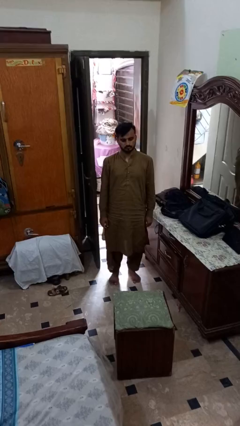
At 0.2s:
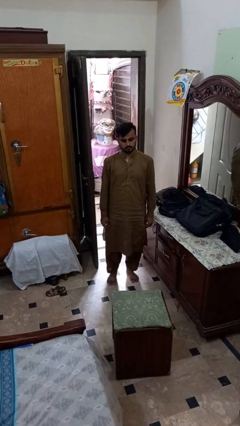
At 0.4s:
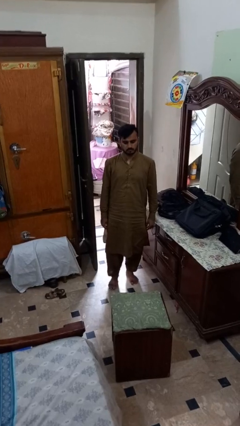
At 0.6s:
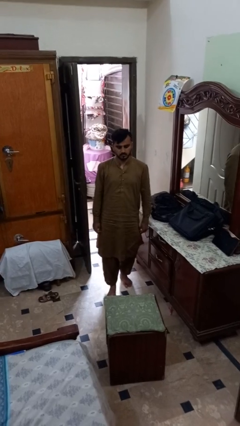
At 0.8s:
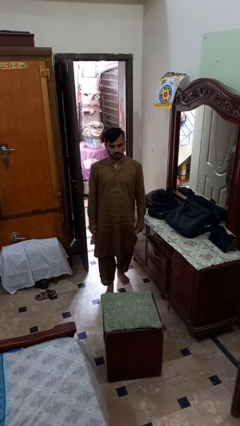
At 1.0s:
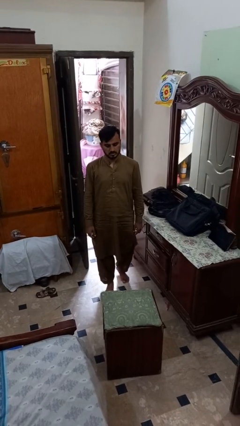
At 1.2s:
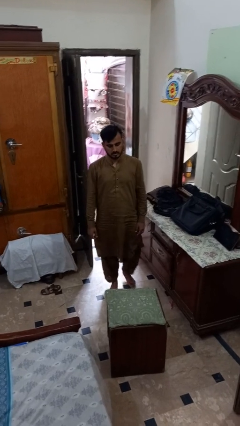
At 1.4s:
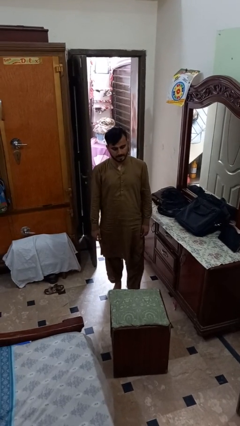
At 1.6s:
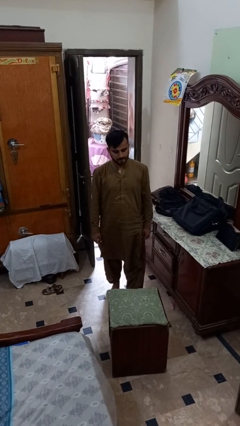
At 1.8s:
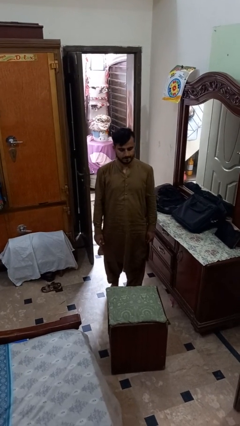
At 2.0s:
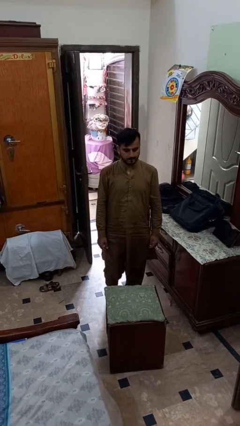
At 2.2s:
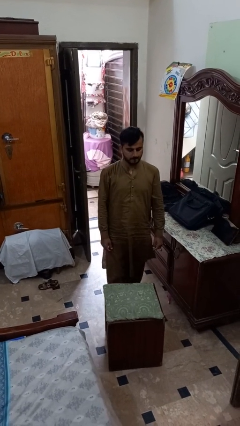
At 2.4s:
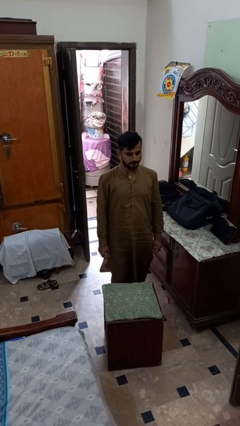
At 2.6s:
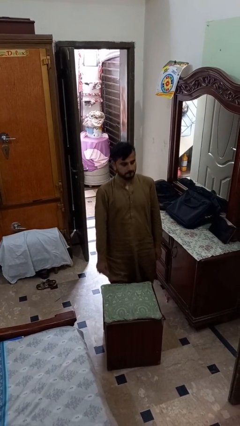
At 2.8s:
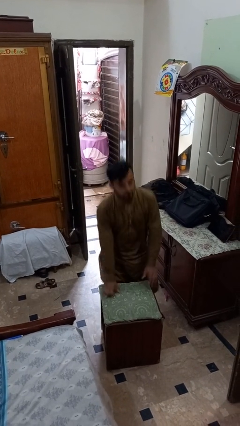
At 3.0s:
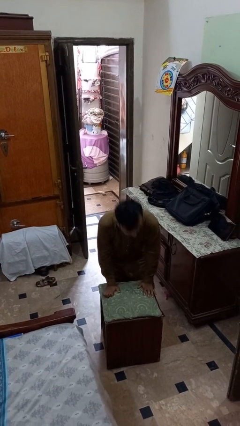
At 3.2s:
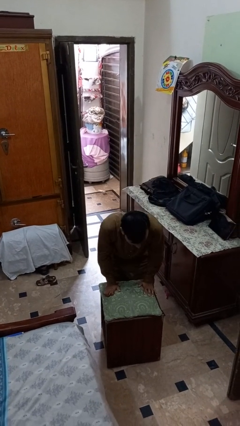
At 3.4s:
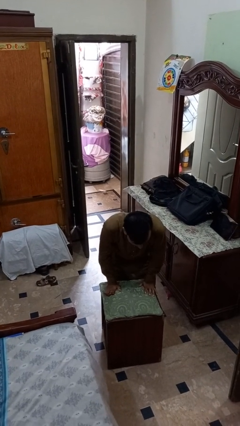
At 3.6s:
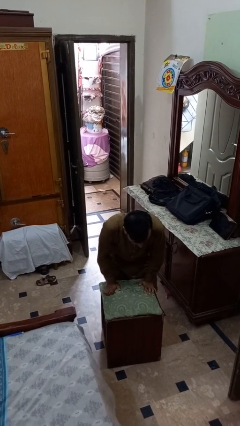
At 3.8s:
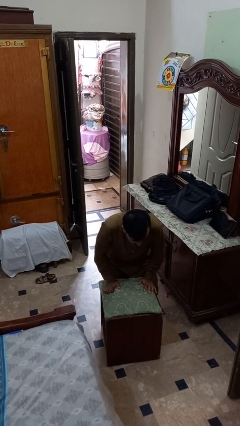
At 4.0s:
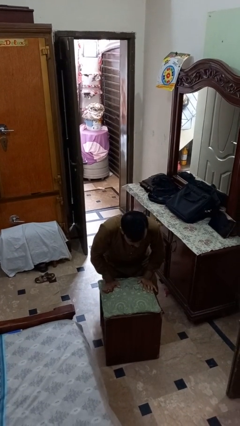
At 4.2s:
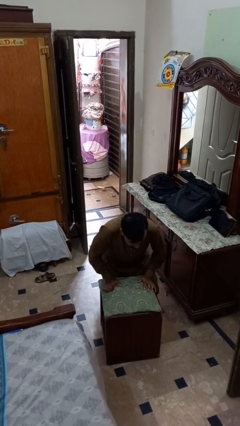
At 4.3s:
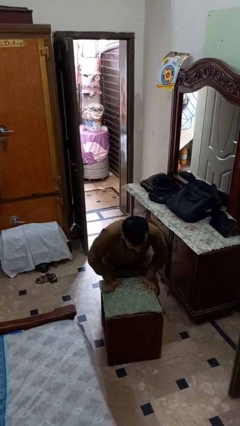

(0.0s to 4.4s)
person bumps into table

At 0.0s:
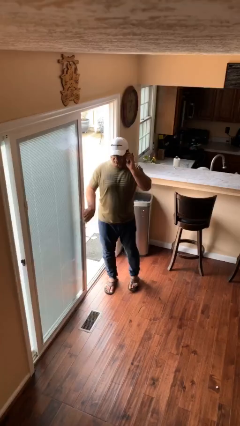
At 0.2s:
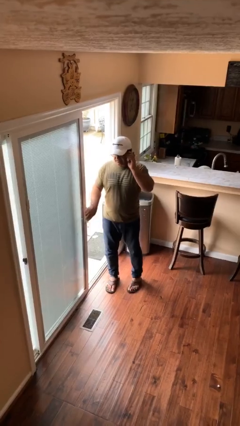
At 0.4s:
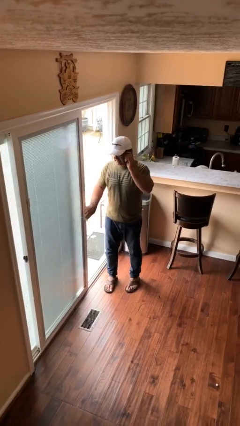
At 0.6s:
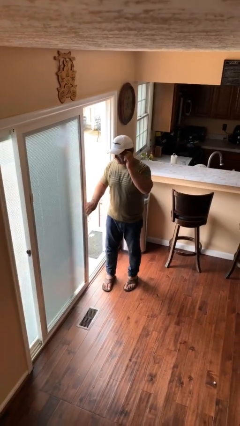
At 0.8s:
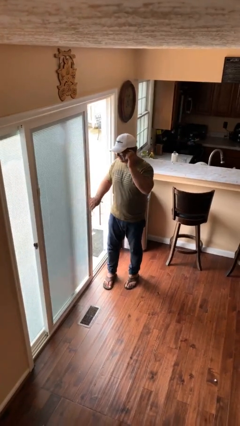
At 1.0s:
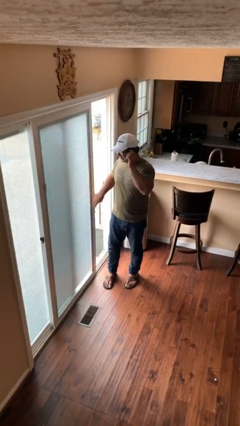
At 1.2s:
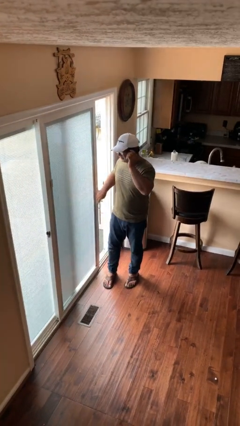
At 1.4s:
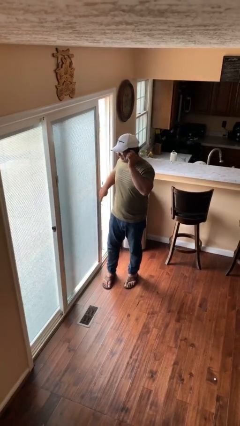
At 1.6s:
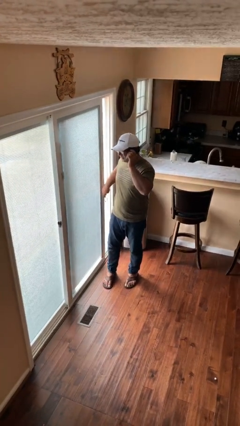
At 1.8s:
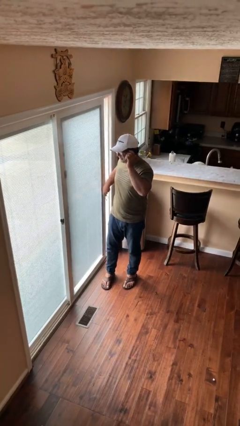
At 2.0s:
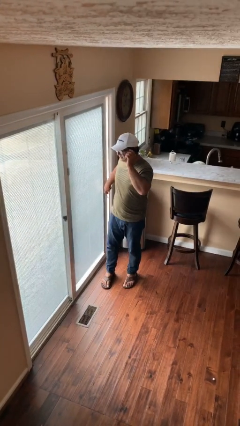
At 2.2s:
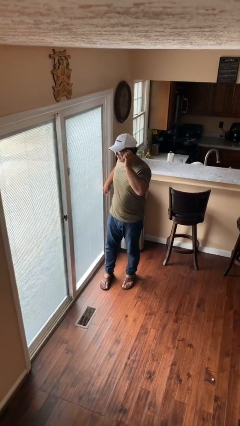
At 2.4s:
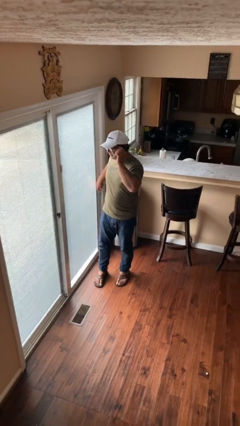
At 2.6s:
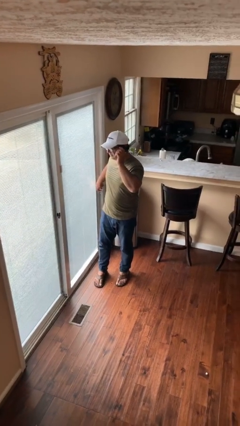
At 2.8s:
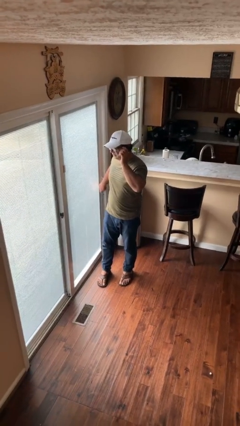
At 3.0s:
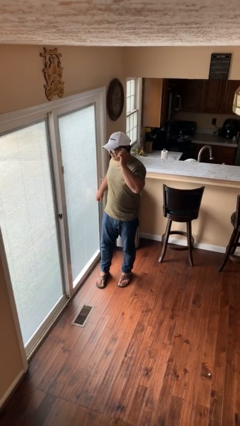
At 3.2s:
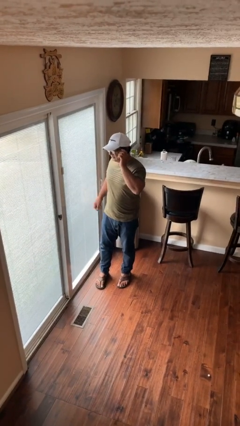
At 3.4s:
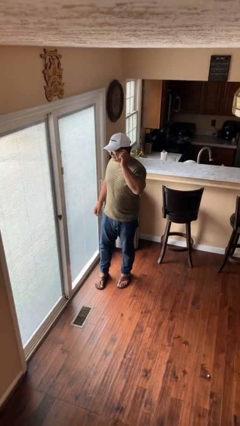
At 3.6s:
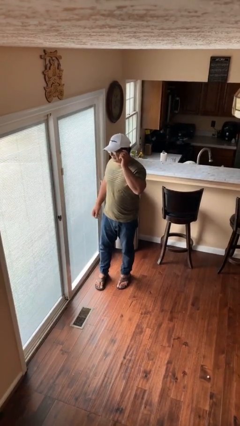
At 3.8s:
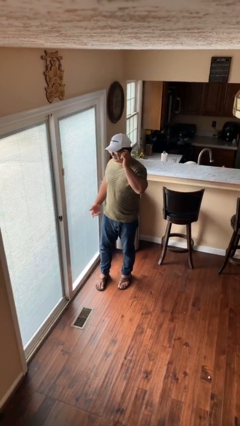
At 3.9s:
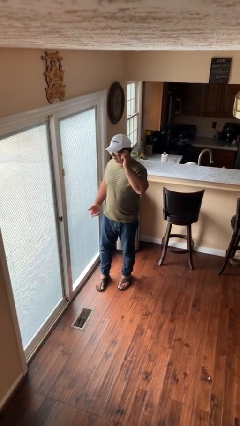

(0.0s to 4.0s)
person closes facility door

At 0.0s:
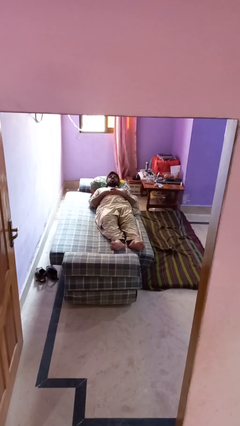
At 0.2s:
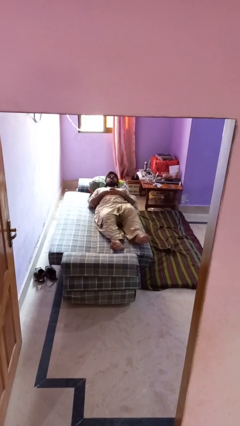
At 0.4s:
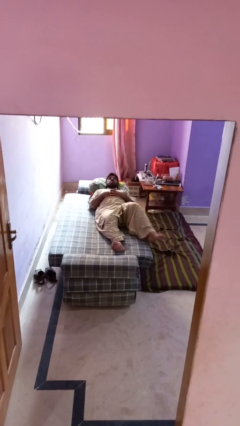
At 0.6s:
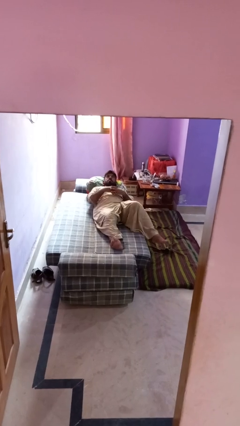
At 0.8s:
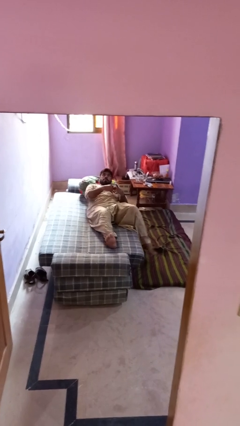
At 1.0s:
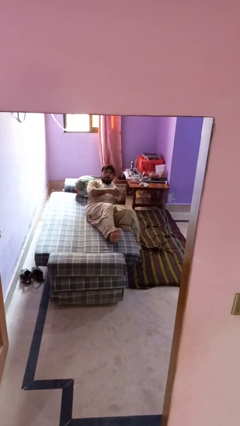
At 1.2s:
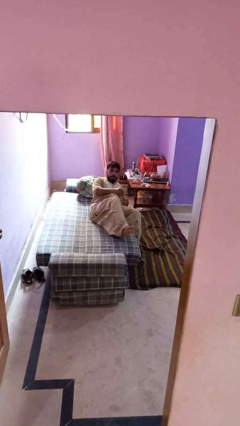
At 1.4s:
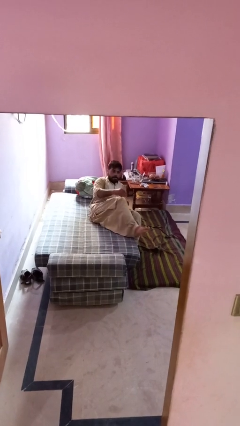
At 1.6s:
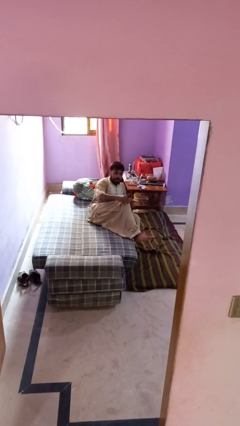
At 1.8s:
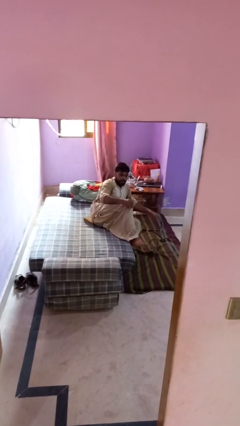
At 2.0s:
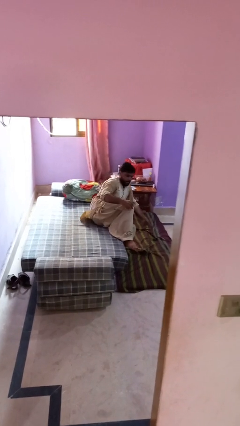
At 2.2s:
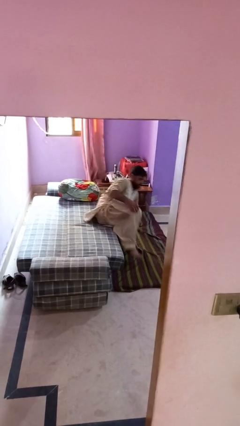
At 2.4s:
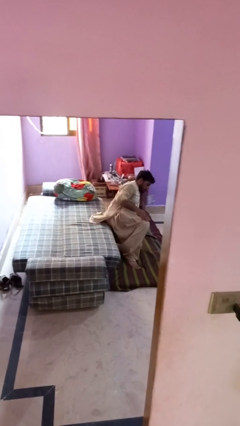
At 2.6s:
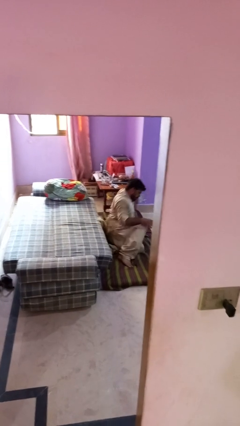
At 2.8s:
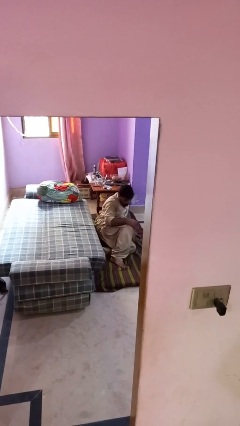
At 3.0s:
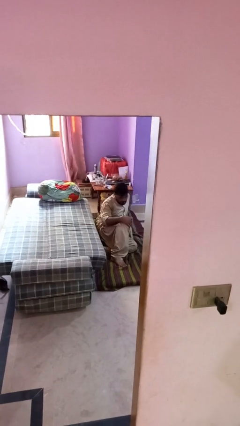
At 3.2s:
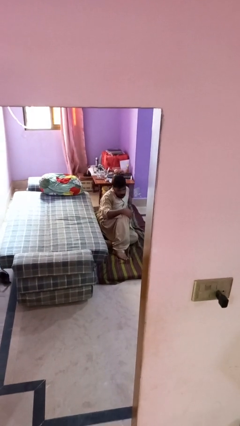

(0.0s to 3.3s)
person falls from bed

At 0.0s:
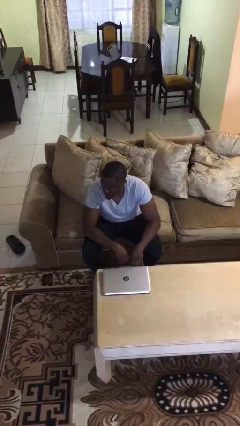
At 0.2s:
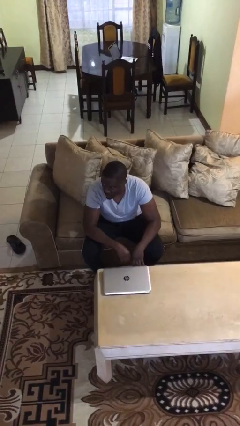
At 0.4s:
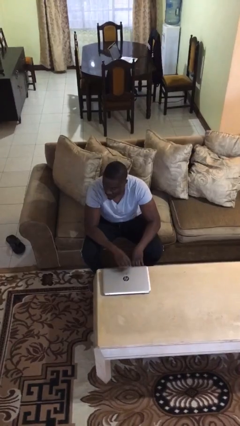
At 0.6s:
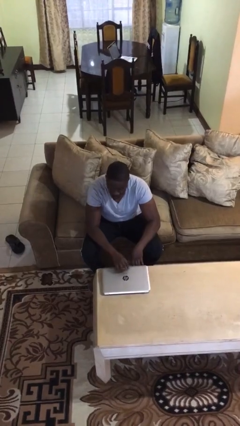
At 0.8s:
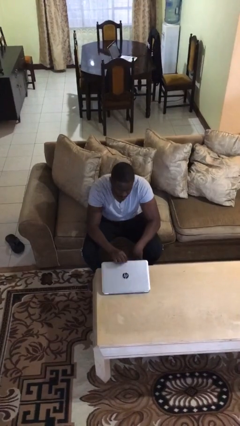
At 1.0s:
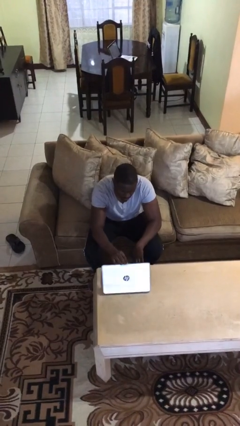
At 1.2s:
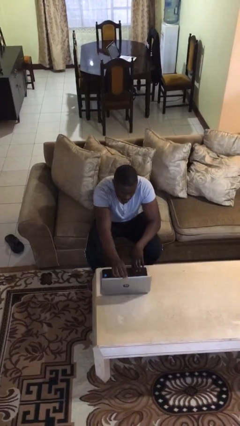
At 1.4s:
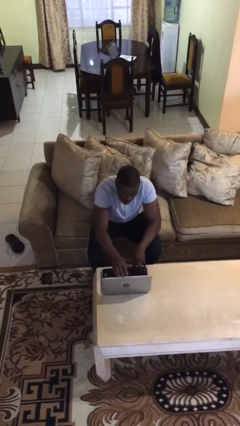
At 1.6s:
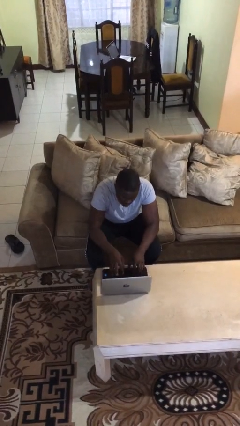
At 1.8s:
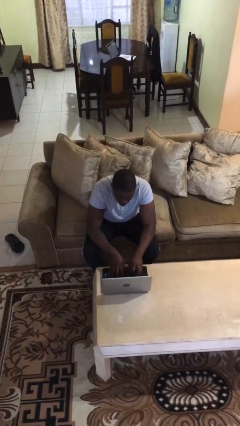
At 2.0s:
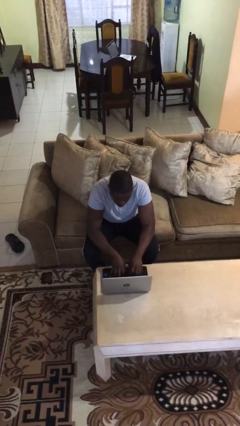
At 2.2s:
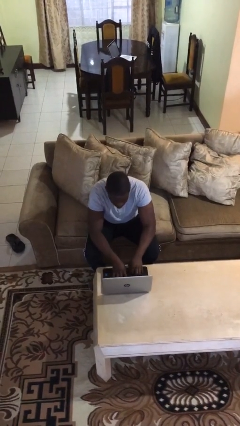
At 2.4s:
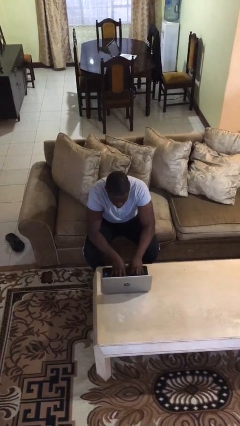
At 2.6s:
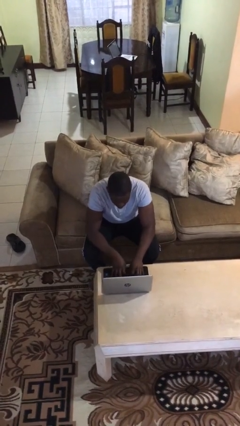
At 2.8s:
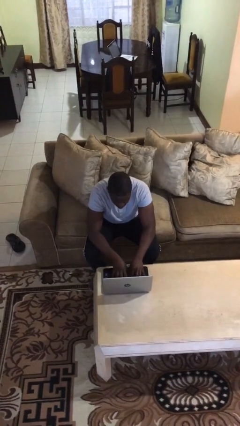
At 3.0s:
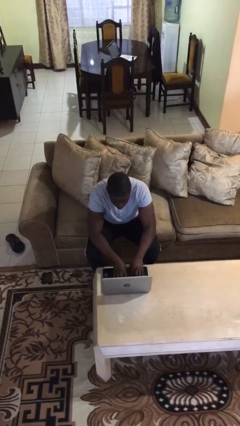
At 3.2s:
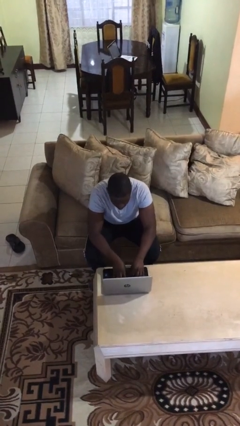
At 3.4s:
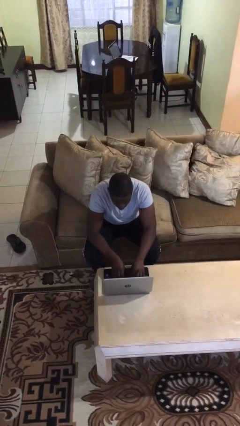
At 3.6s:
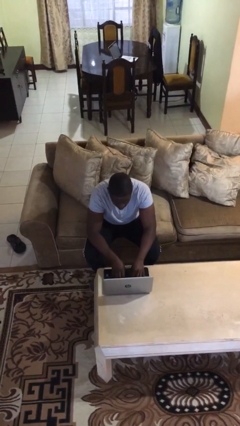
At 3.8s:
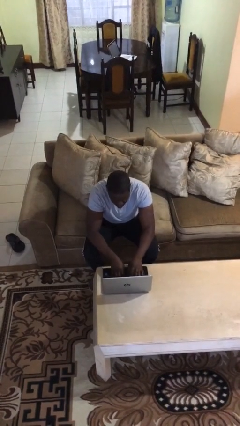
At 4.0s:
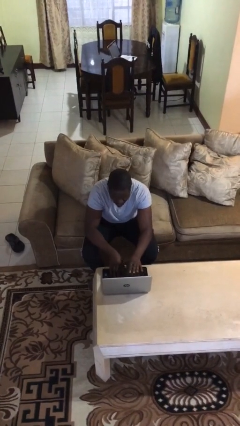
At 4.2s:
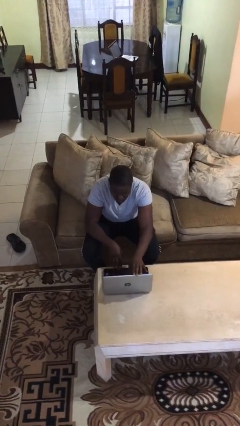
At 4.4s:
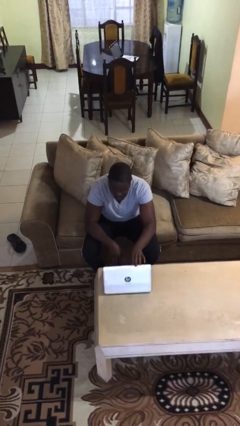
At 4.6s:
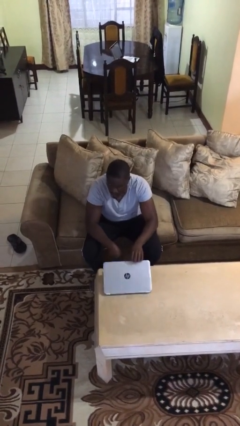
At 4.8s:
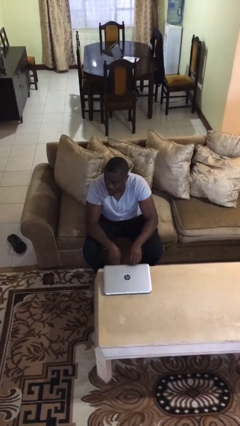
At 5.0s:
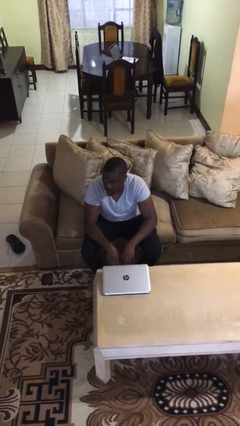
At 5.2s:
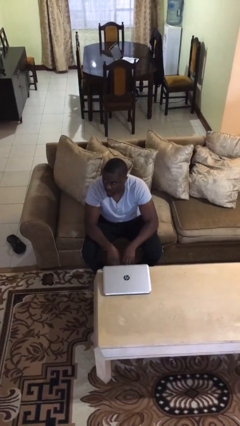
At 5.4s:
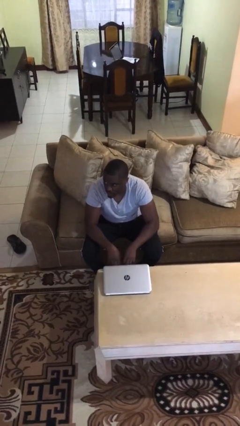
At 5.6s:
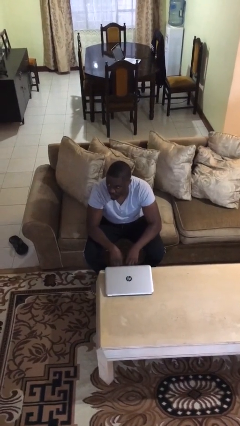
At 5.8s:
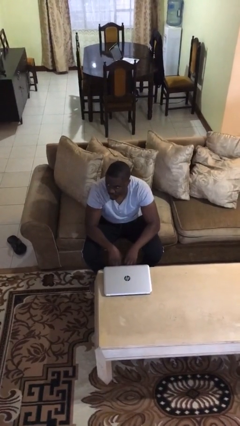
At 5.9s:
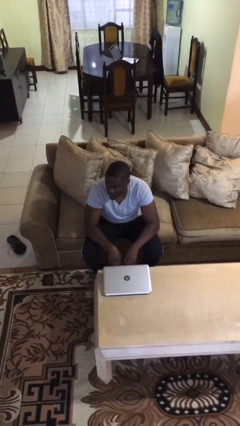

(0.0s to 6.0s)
person interacts with laptop
